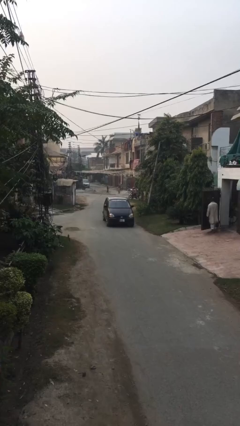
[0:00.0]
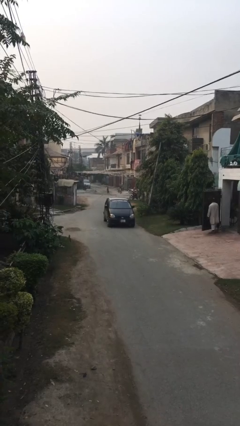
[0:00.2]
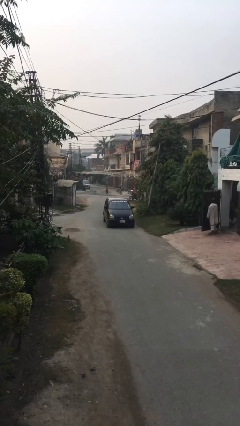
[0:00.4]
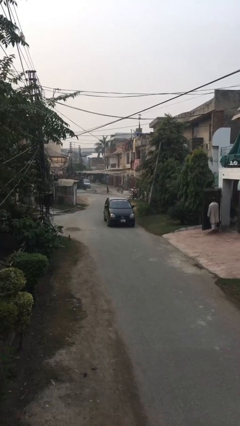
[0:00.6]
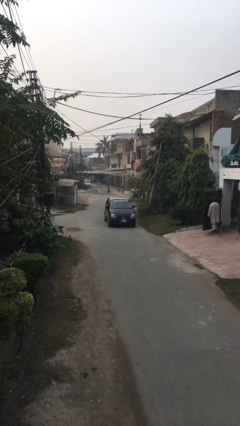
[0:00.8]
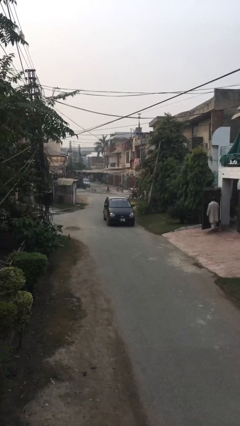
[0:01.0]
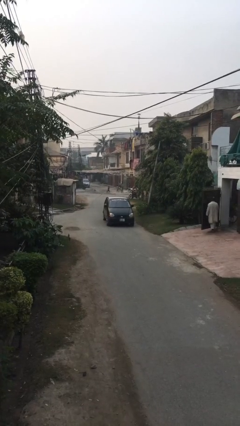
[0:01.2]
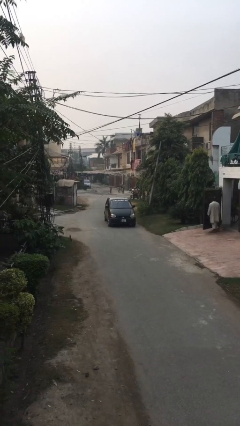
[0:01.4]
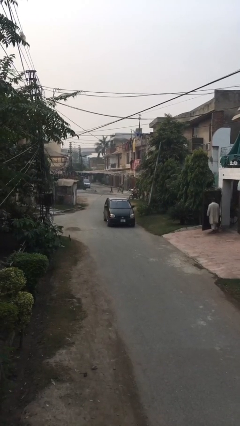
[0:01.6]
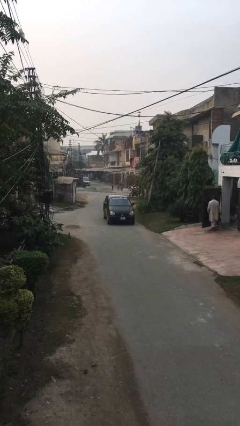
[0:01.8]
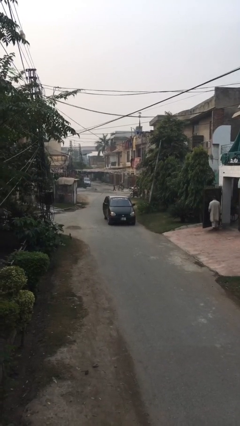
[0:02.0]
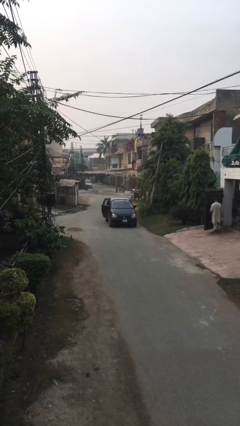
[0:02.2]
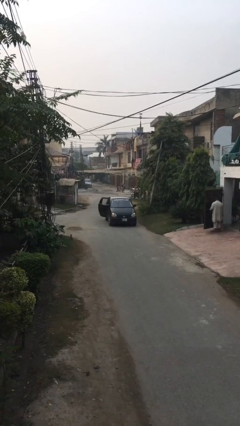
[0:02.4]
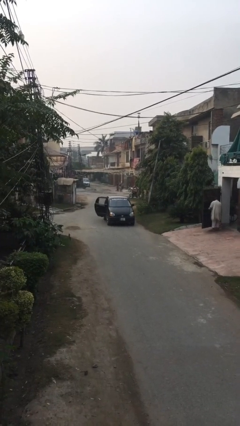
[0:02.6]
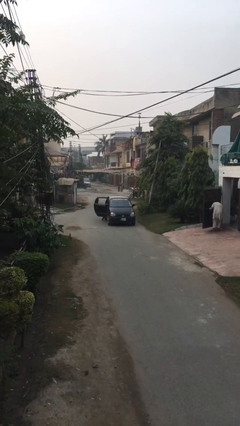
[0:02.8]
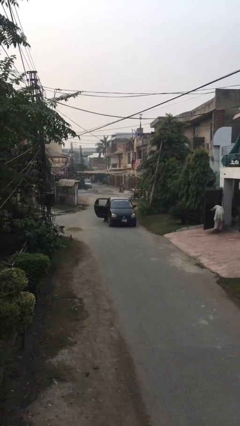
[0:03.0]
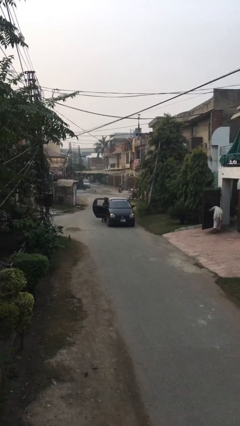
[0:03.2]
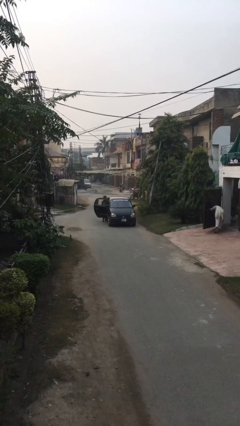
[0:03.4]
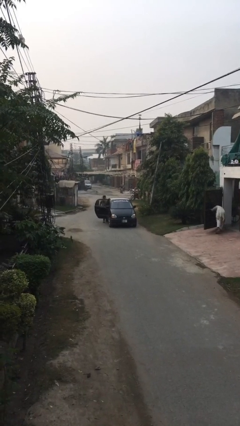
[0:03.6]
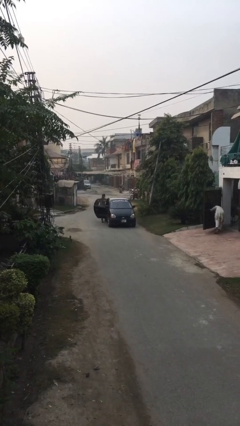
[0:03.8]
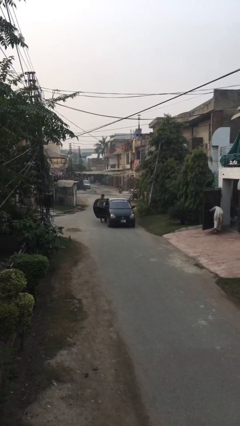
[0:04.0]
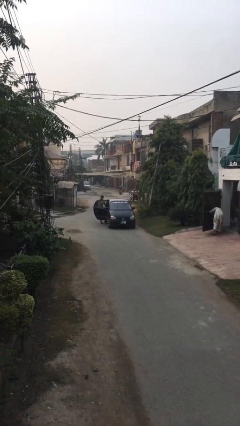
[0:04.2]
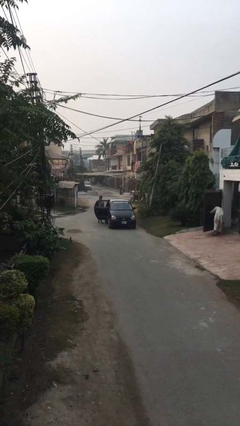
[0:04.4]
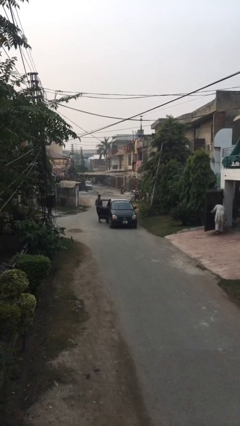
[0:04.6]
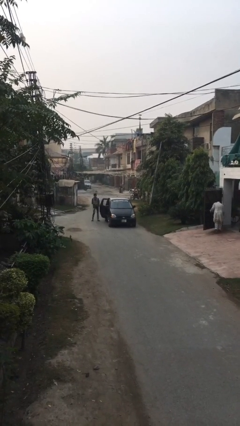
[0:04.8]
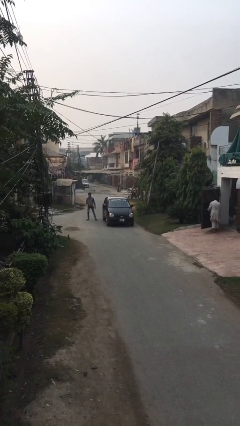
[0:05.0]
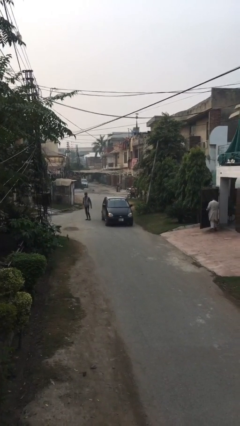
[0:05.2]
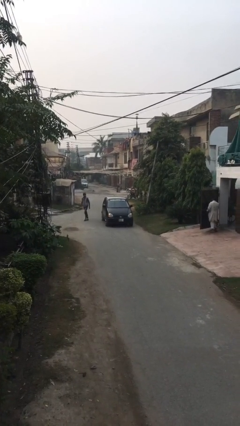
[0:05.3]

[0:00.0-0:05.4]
car drops off person

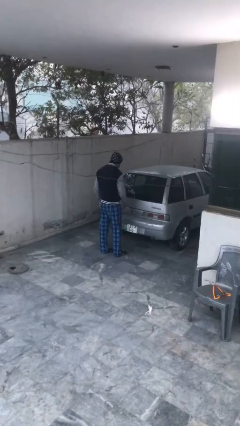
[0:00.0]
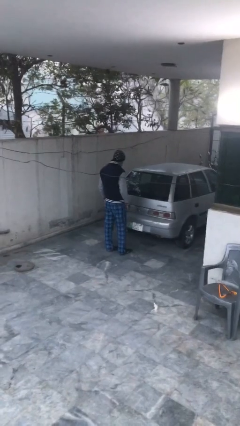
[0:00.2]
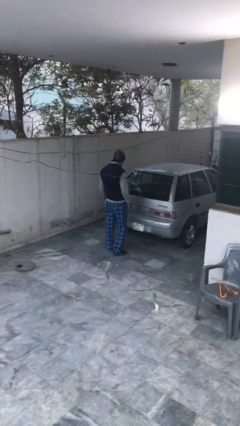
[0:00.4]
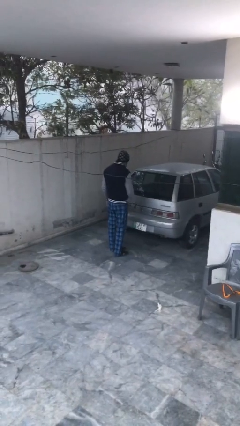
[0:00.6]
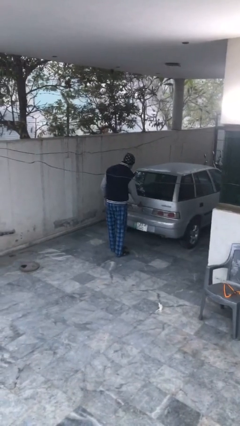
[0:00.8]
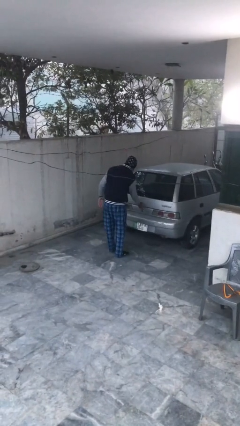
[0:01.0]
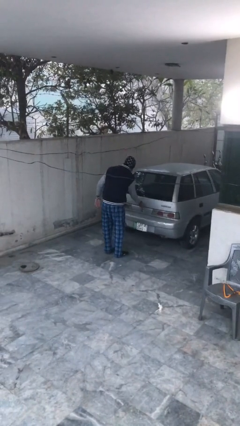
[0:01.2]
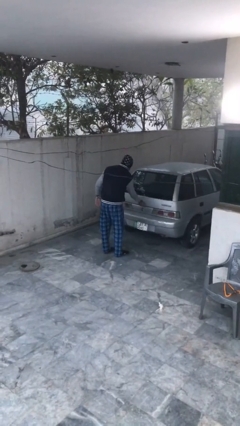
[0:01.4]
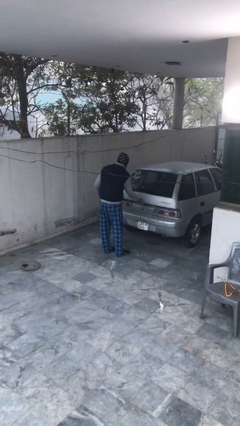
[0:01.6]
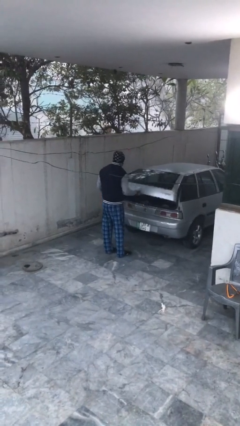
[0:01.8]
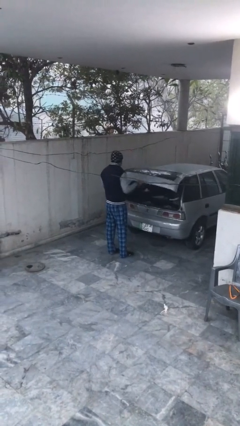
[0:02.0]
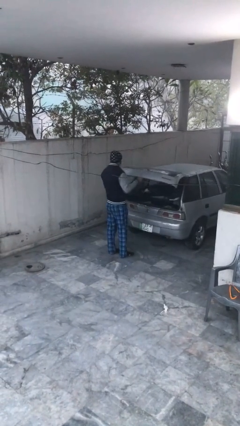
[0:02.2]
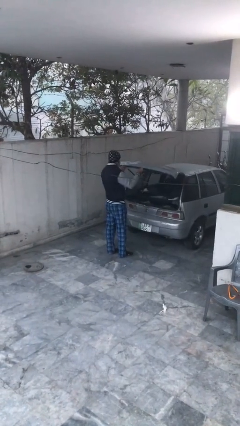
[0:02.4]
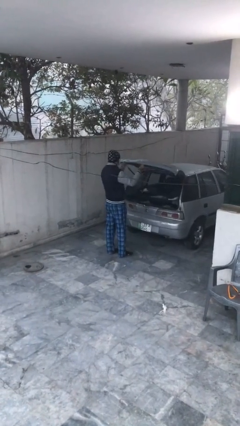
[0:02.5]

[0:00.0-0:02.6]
person opens car trunk

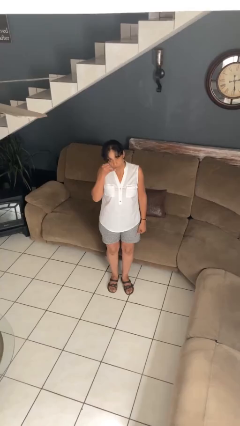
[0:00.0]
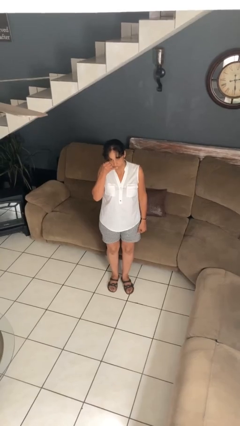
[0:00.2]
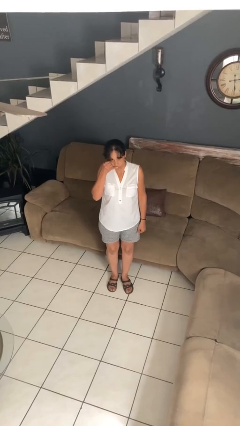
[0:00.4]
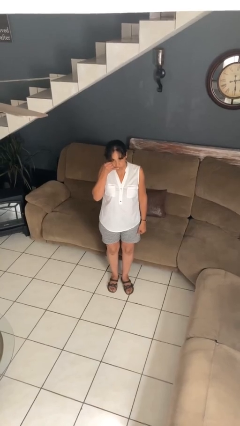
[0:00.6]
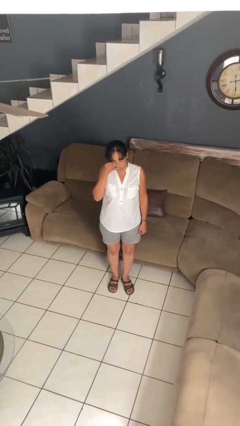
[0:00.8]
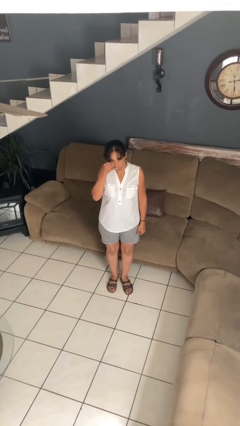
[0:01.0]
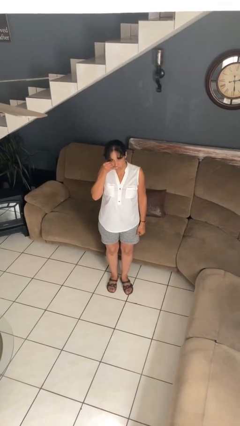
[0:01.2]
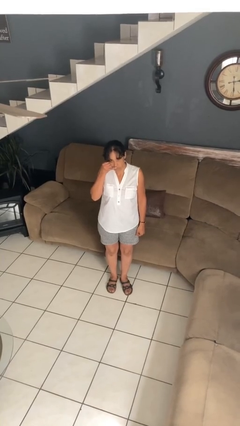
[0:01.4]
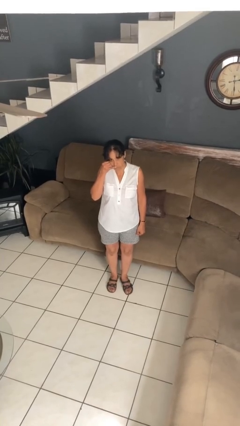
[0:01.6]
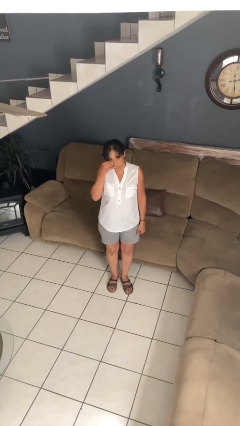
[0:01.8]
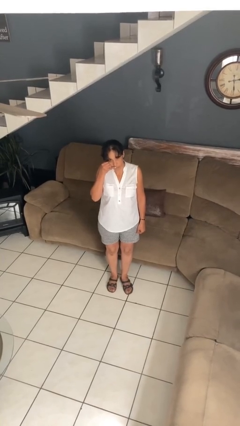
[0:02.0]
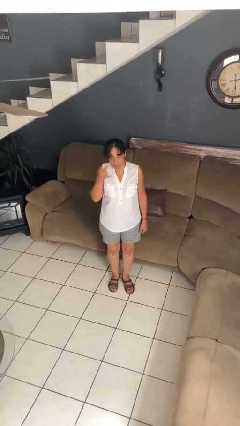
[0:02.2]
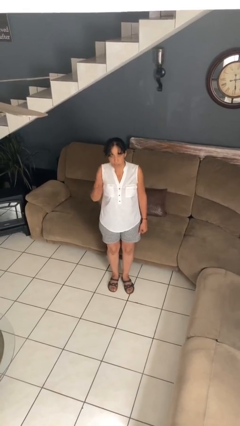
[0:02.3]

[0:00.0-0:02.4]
person gestures call me

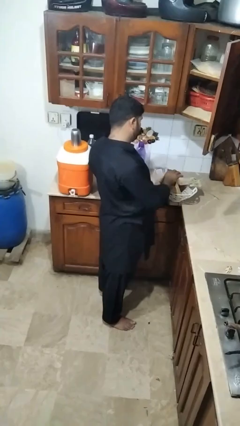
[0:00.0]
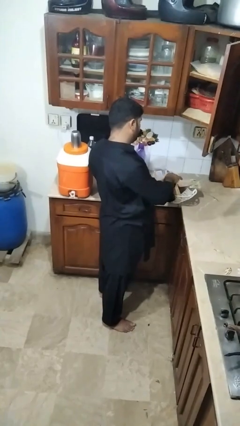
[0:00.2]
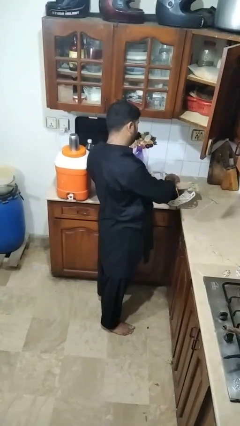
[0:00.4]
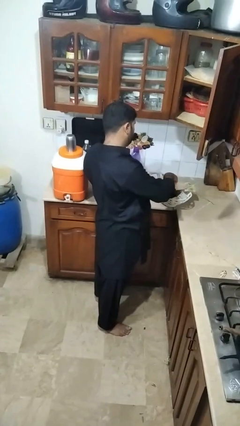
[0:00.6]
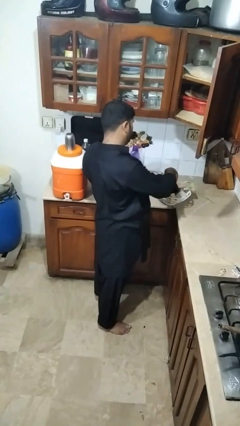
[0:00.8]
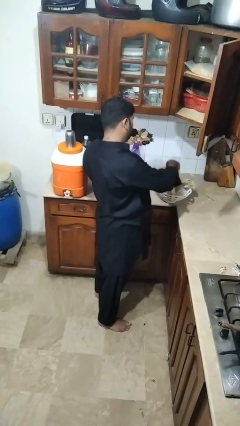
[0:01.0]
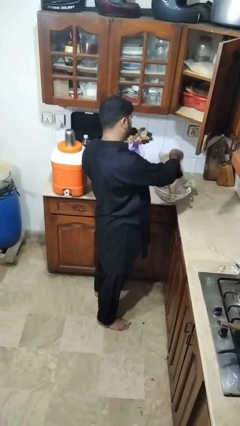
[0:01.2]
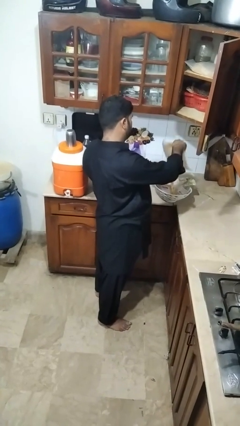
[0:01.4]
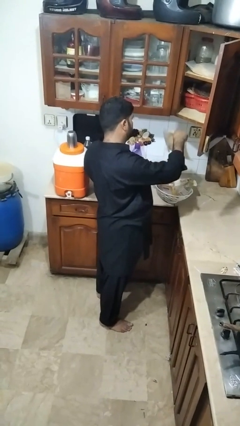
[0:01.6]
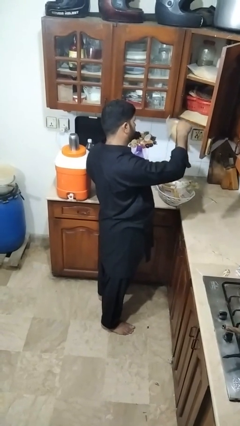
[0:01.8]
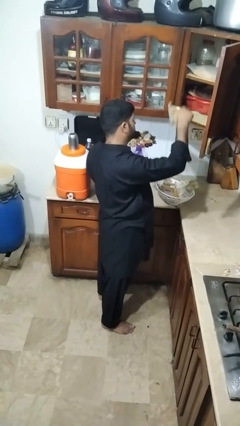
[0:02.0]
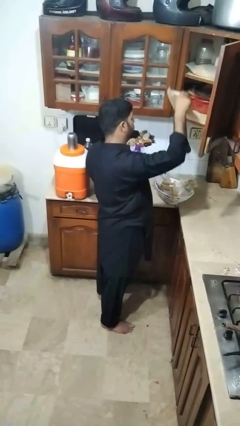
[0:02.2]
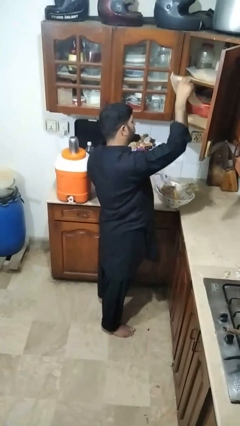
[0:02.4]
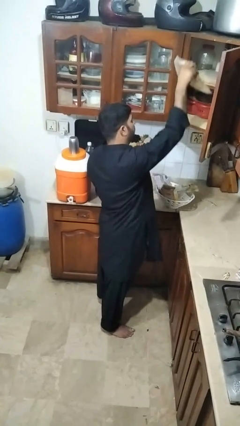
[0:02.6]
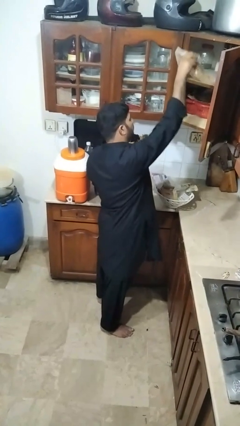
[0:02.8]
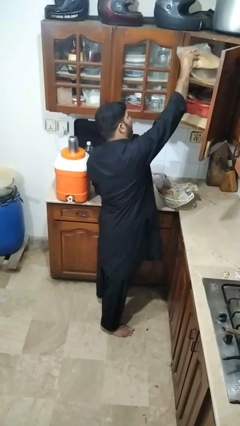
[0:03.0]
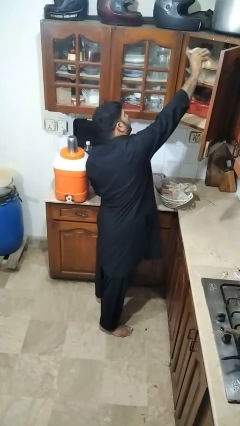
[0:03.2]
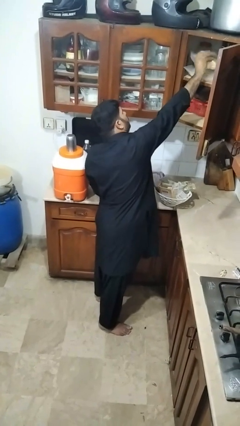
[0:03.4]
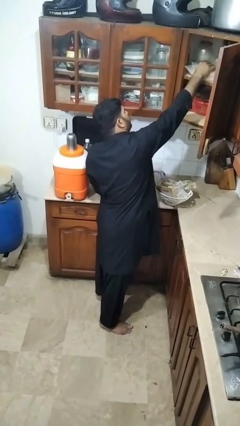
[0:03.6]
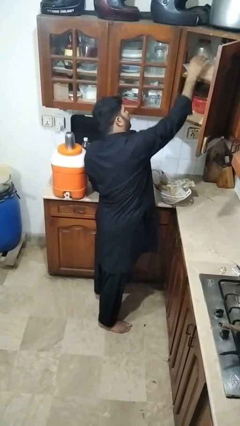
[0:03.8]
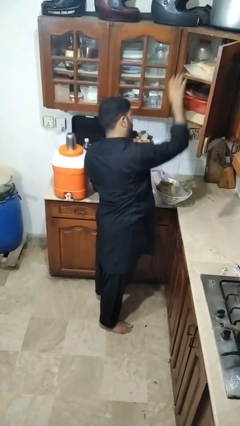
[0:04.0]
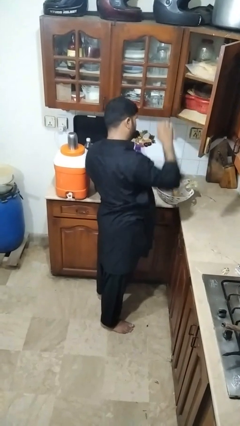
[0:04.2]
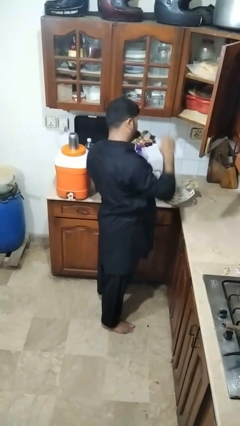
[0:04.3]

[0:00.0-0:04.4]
person loads groceries into cabinet

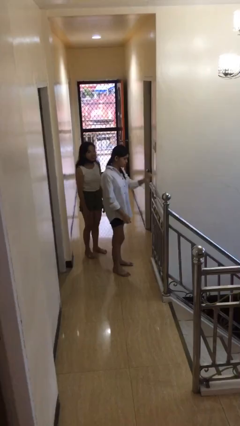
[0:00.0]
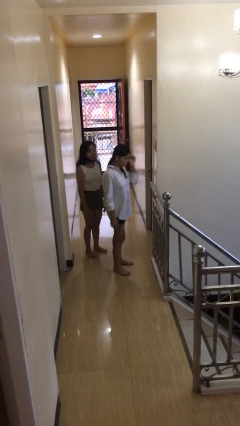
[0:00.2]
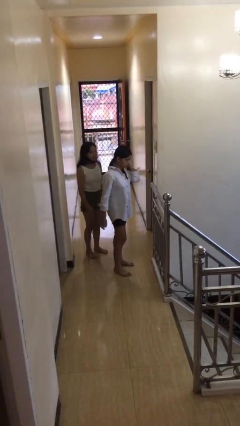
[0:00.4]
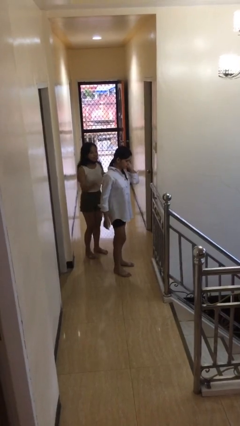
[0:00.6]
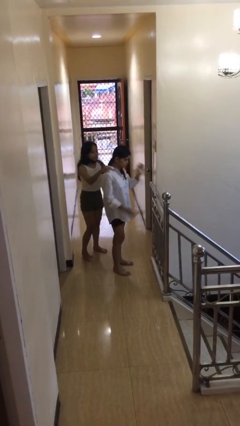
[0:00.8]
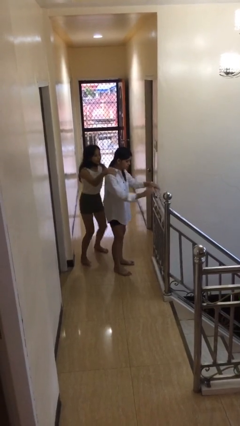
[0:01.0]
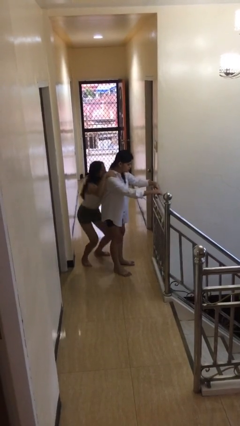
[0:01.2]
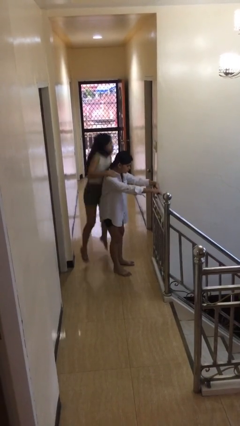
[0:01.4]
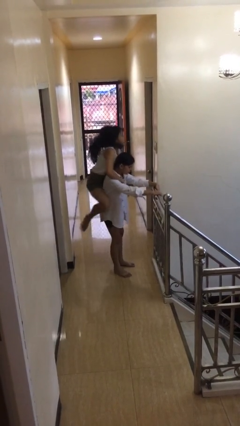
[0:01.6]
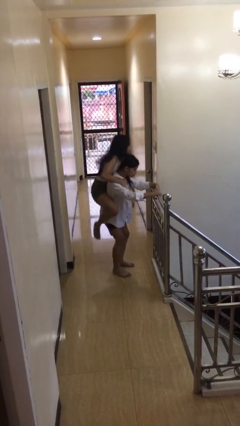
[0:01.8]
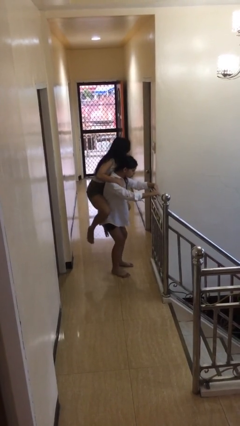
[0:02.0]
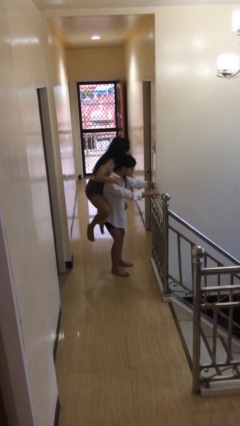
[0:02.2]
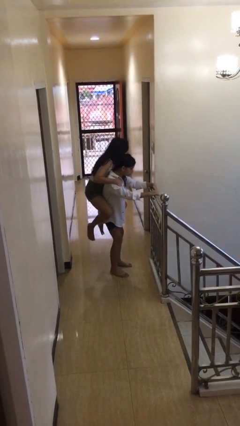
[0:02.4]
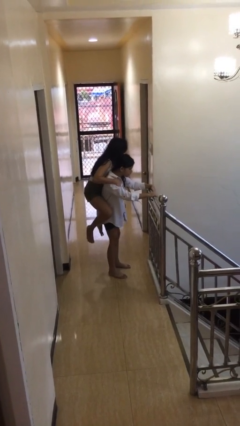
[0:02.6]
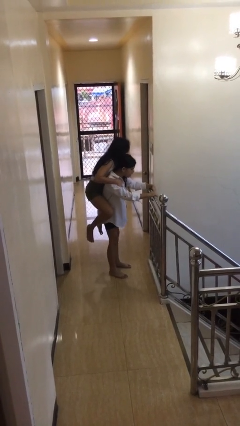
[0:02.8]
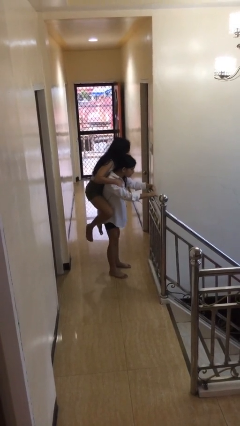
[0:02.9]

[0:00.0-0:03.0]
person carries person over shoulder
